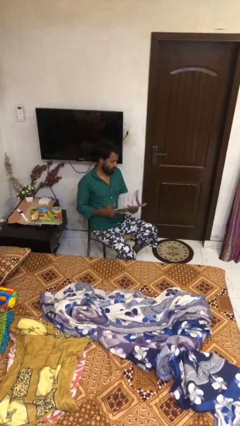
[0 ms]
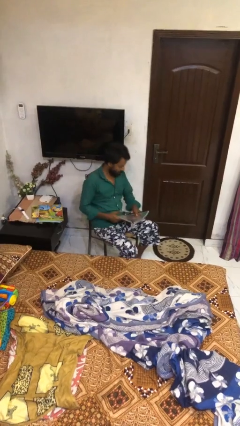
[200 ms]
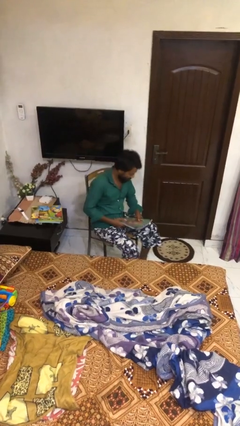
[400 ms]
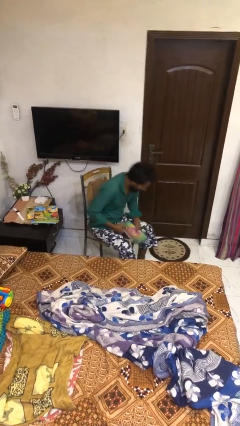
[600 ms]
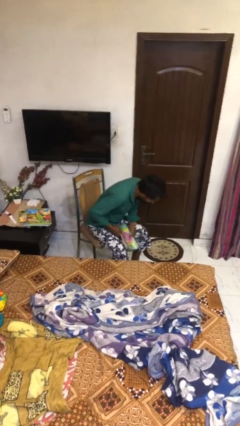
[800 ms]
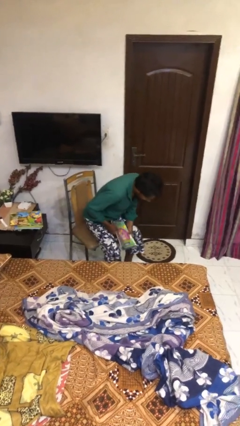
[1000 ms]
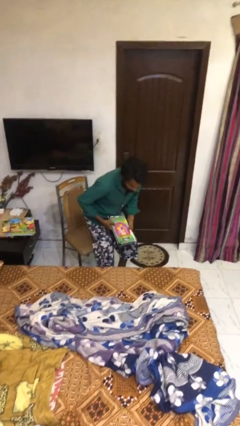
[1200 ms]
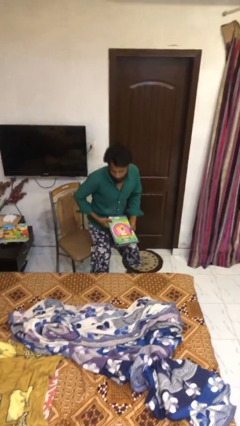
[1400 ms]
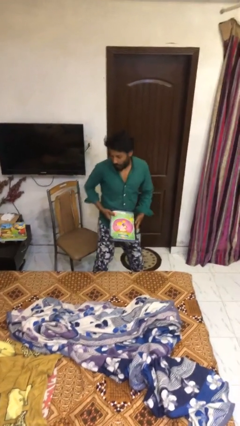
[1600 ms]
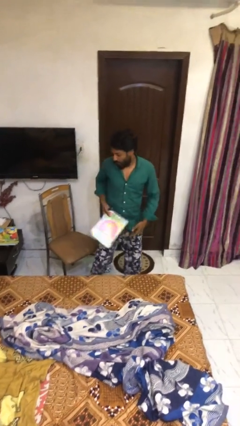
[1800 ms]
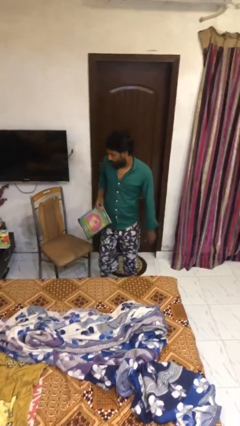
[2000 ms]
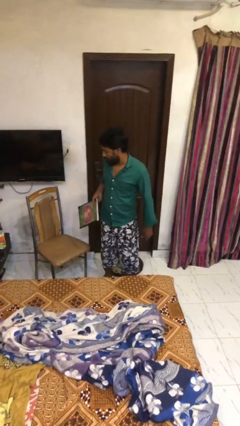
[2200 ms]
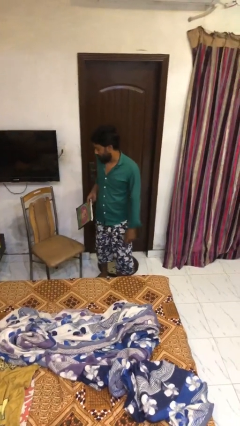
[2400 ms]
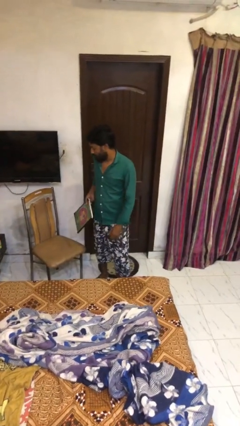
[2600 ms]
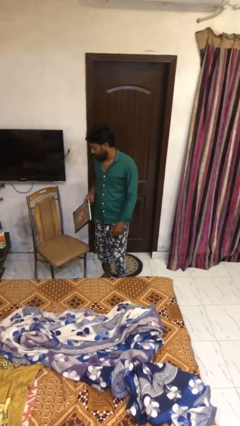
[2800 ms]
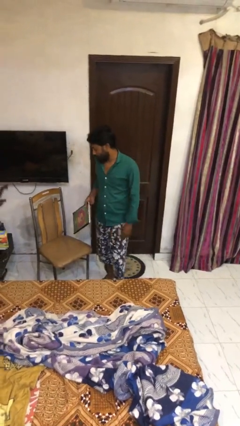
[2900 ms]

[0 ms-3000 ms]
person stands up

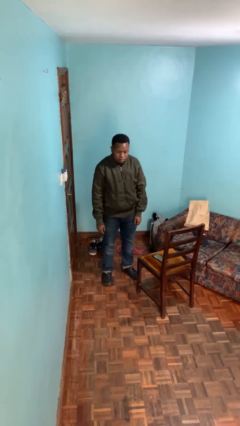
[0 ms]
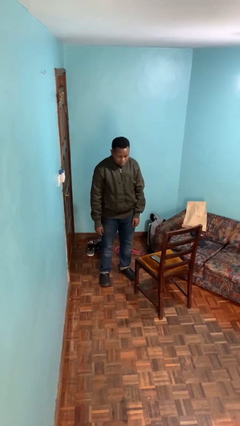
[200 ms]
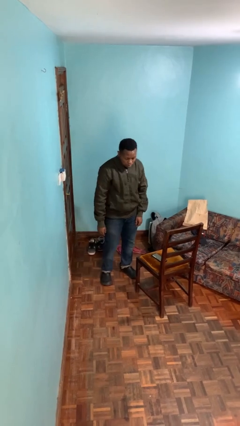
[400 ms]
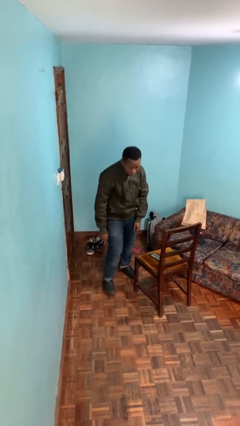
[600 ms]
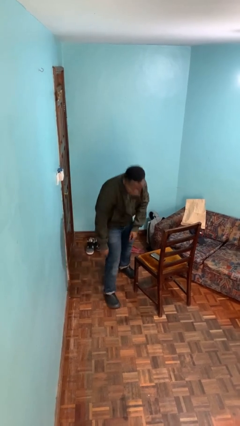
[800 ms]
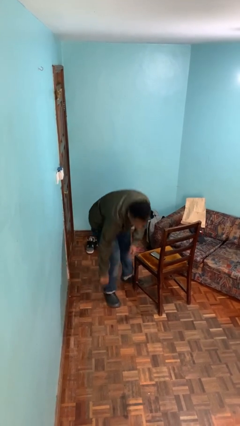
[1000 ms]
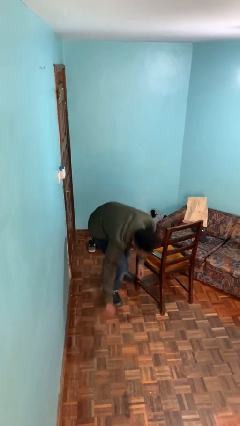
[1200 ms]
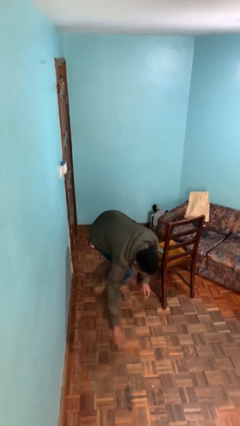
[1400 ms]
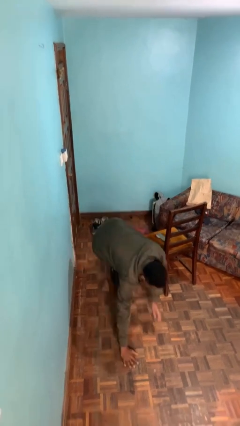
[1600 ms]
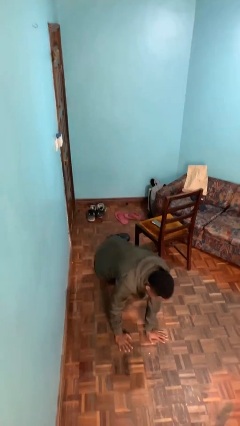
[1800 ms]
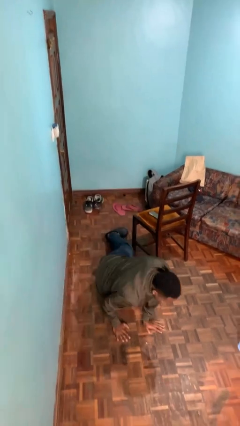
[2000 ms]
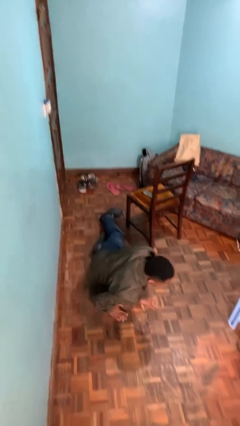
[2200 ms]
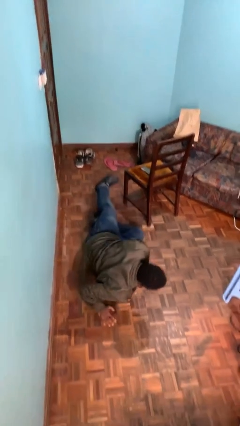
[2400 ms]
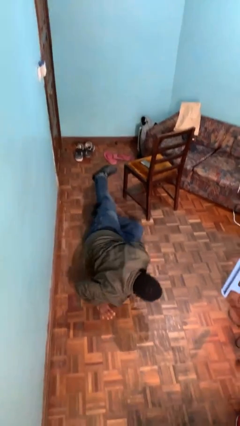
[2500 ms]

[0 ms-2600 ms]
person trips on object on floor

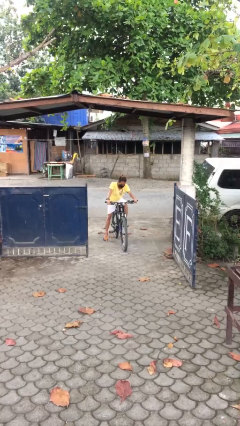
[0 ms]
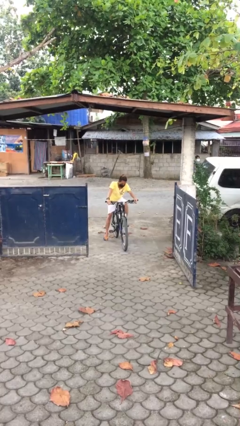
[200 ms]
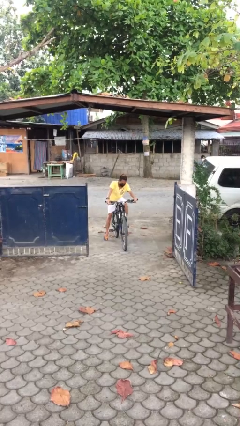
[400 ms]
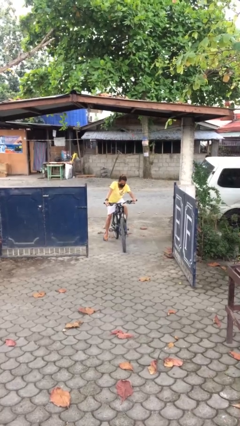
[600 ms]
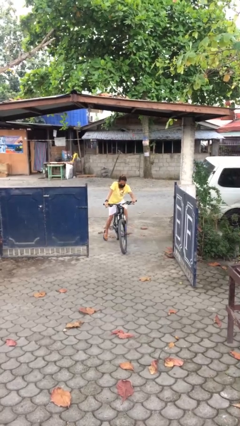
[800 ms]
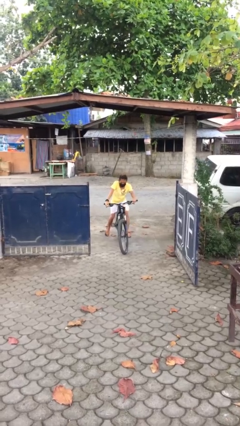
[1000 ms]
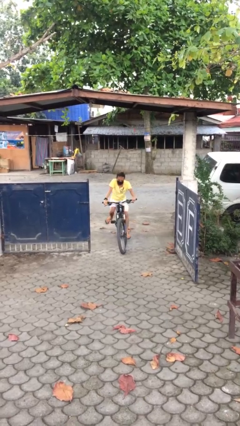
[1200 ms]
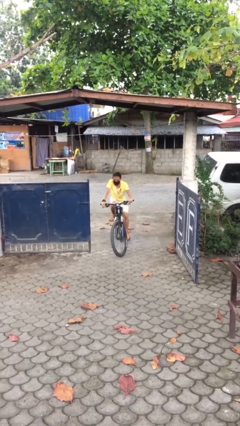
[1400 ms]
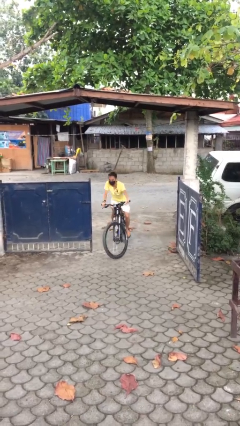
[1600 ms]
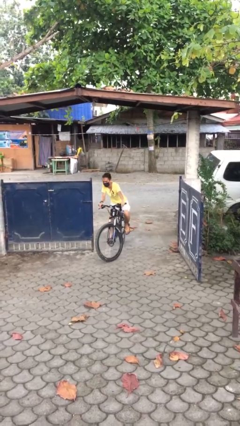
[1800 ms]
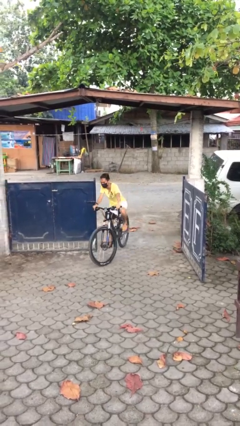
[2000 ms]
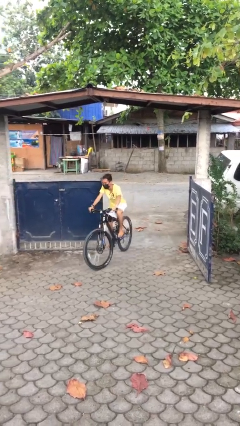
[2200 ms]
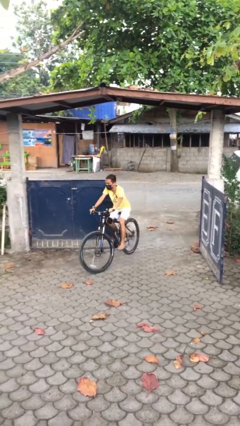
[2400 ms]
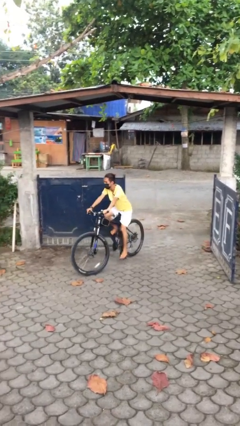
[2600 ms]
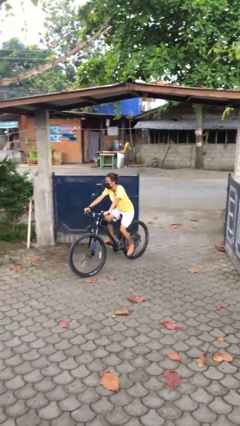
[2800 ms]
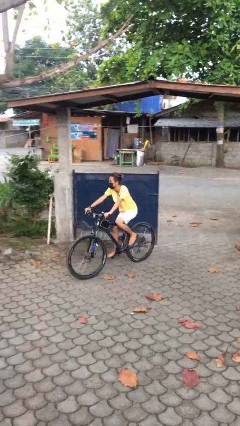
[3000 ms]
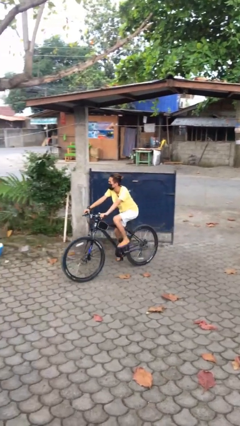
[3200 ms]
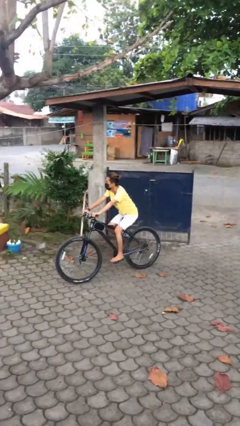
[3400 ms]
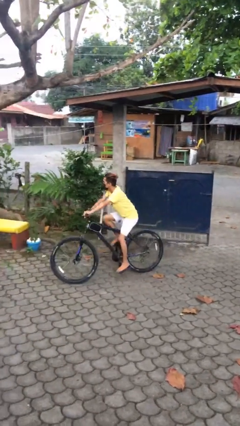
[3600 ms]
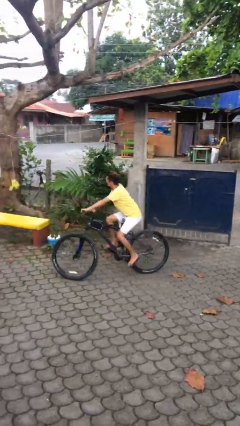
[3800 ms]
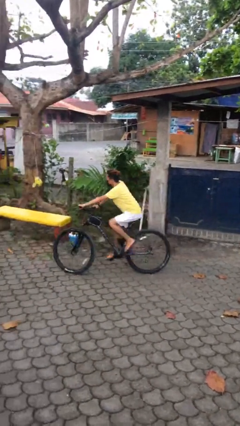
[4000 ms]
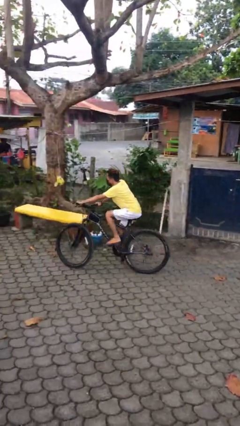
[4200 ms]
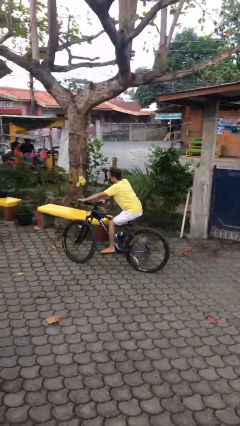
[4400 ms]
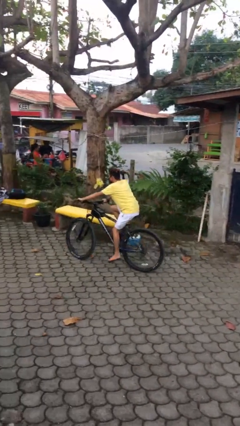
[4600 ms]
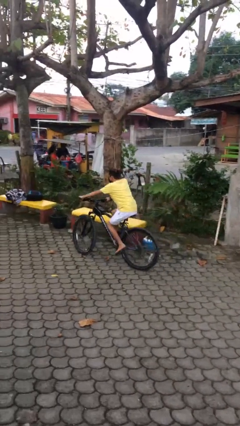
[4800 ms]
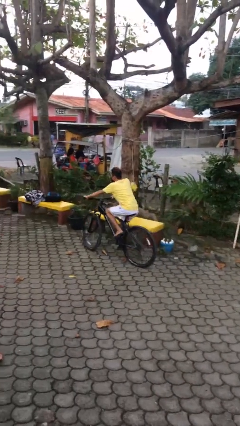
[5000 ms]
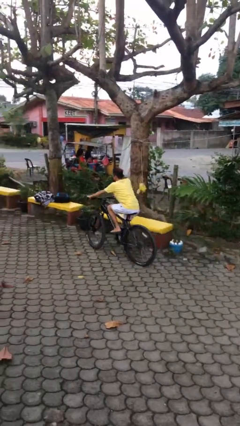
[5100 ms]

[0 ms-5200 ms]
person rides bicycle

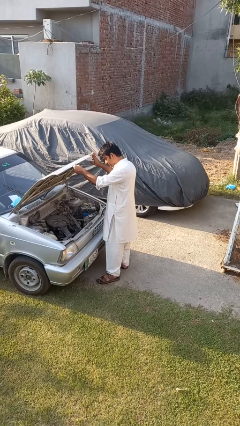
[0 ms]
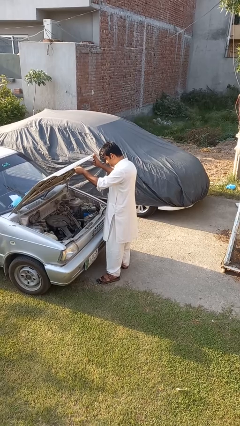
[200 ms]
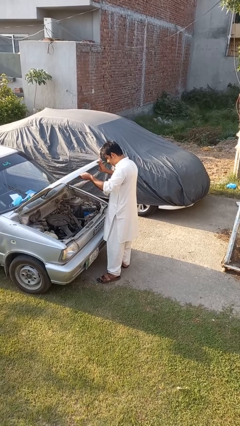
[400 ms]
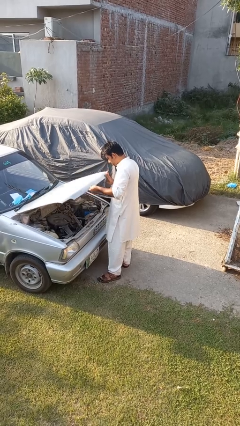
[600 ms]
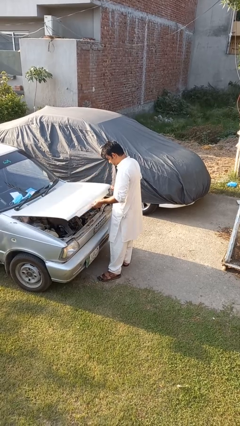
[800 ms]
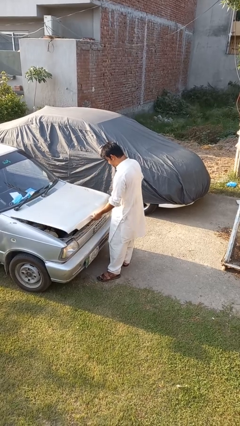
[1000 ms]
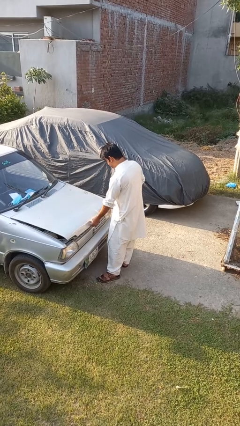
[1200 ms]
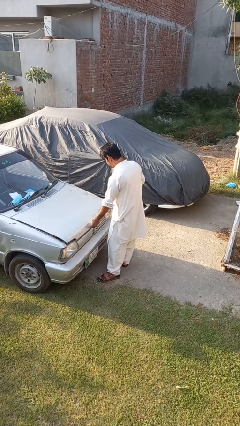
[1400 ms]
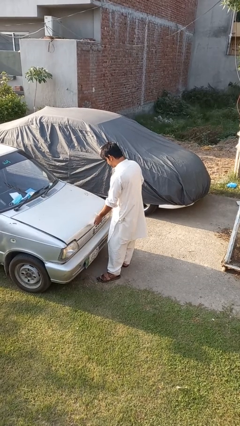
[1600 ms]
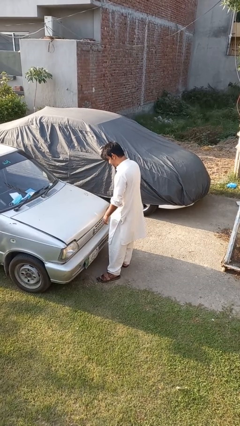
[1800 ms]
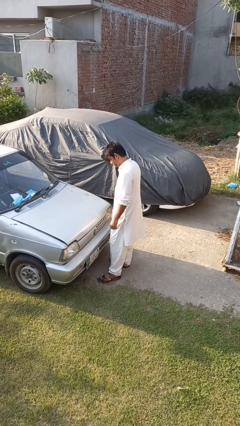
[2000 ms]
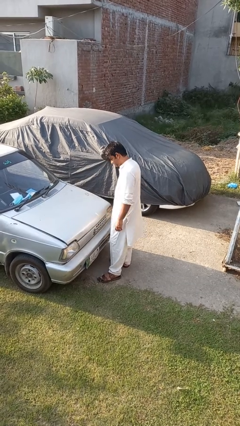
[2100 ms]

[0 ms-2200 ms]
person closes car hood

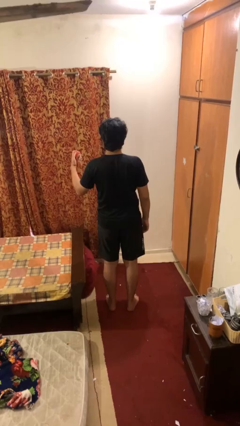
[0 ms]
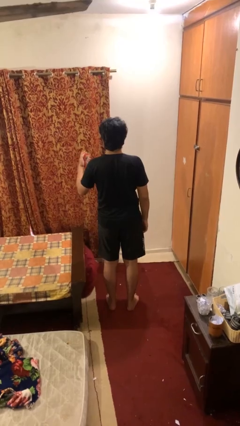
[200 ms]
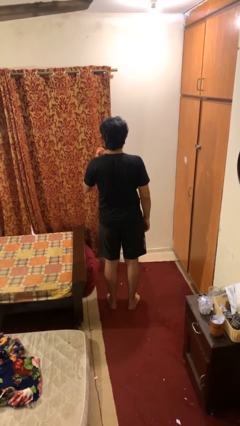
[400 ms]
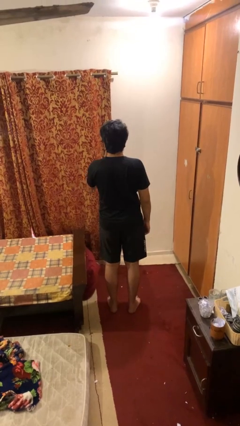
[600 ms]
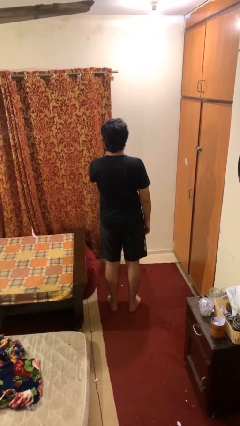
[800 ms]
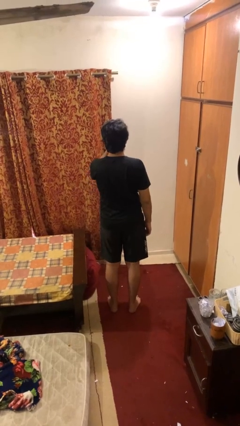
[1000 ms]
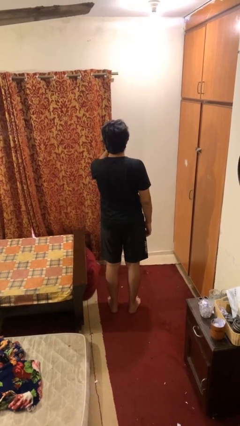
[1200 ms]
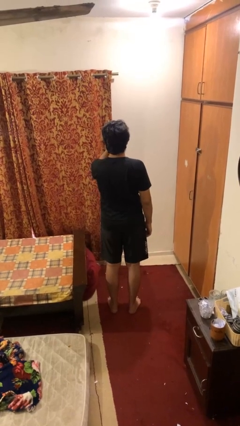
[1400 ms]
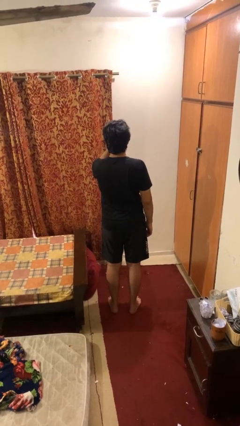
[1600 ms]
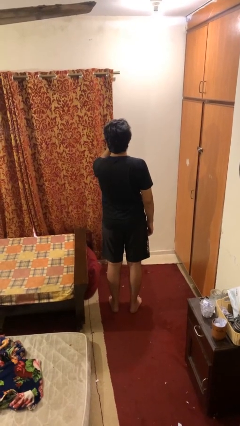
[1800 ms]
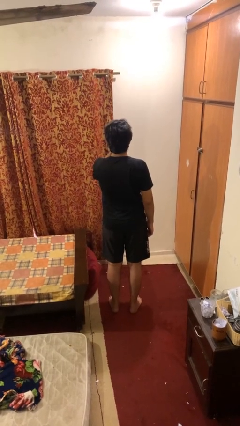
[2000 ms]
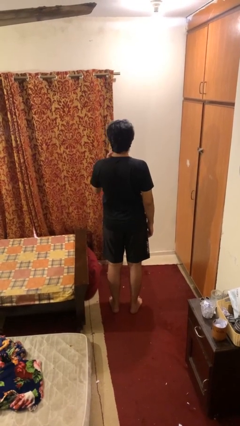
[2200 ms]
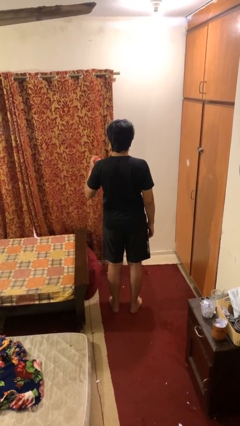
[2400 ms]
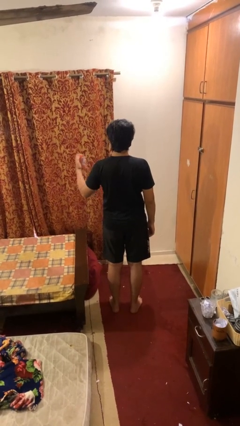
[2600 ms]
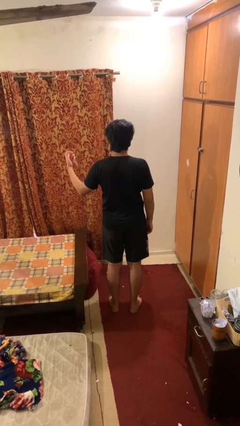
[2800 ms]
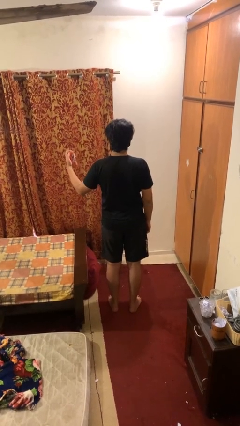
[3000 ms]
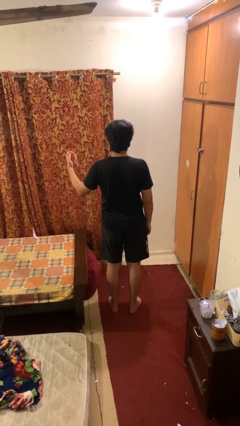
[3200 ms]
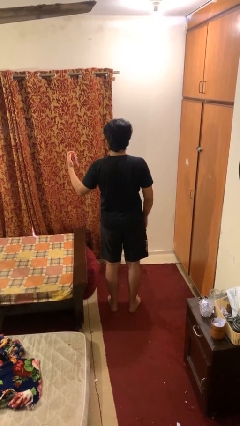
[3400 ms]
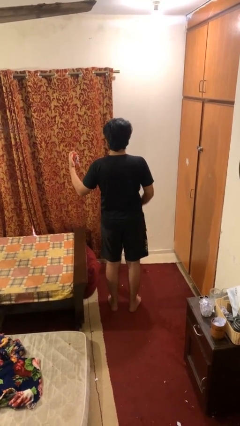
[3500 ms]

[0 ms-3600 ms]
person drinks from beverage can

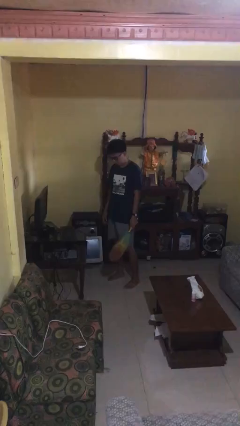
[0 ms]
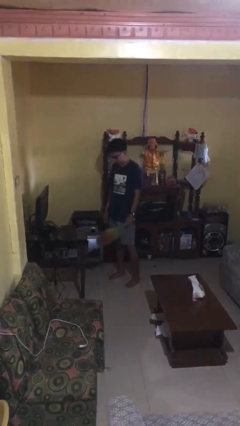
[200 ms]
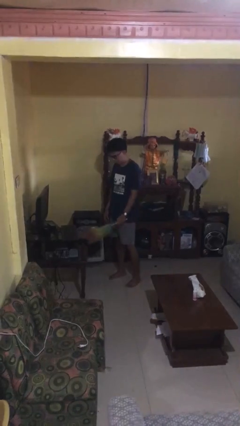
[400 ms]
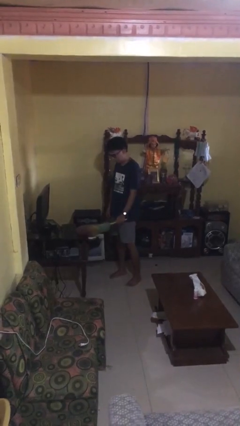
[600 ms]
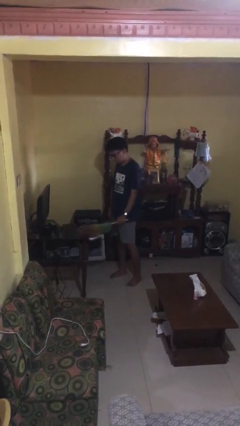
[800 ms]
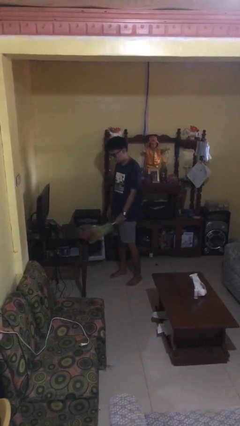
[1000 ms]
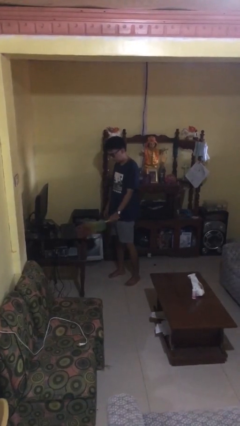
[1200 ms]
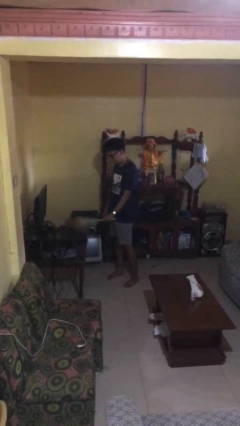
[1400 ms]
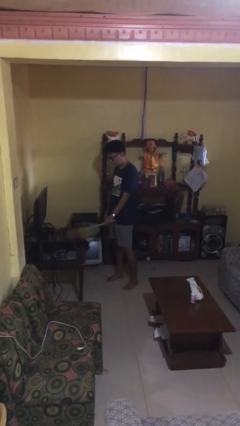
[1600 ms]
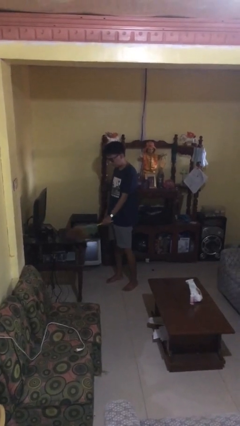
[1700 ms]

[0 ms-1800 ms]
person dusts furniture
